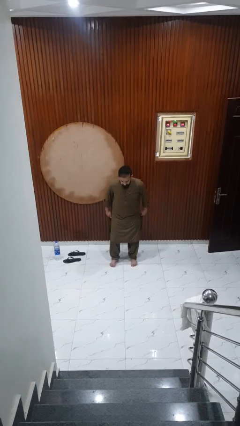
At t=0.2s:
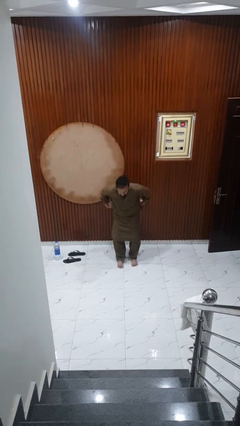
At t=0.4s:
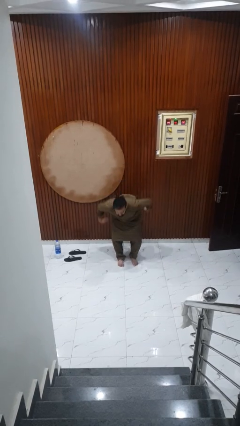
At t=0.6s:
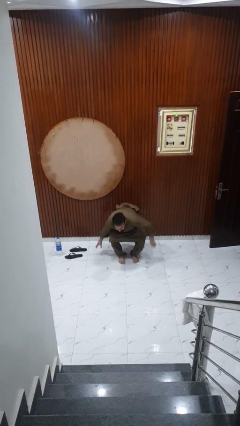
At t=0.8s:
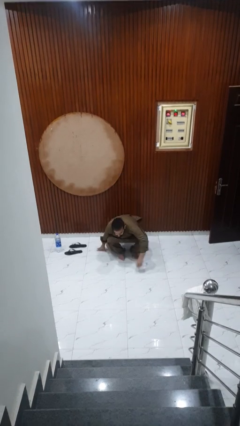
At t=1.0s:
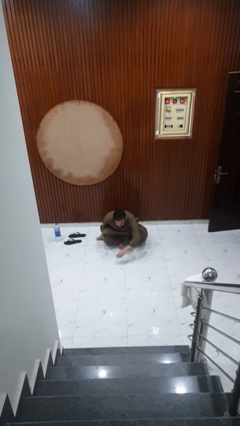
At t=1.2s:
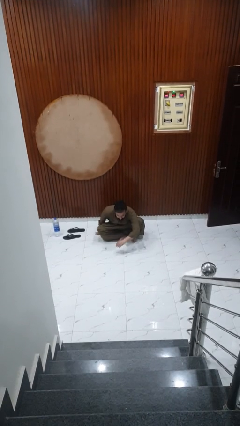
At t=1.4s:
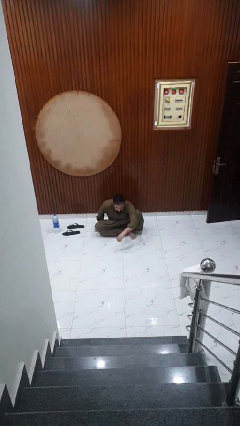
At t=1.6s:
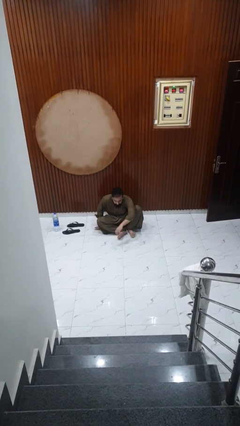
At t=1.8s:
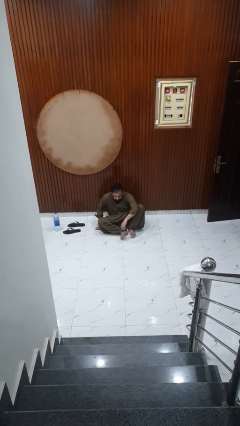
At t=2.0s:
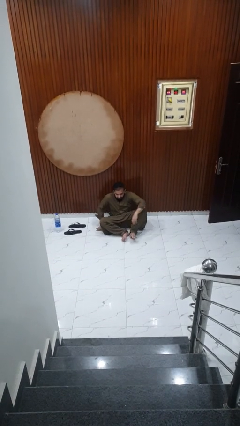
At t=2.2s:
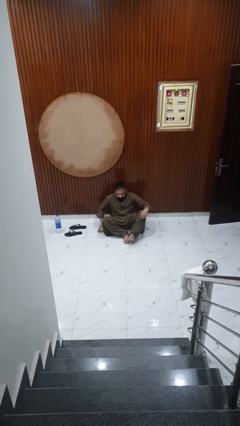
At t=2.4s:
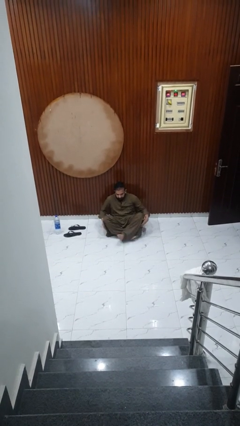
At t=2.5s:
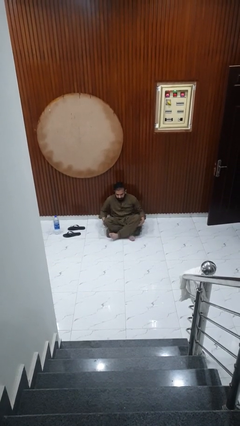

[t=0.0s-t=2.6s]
person sits crisscross

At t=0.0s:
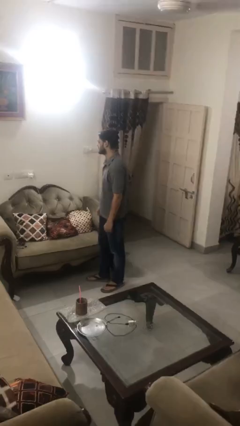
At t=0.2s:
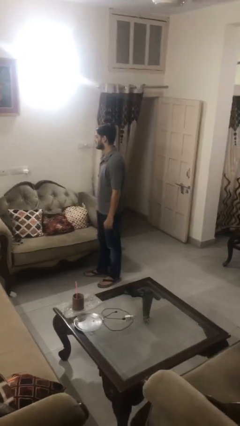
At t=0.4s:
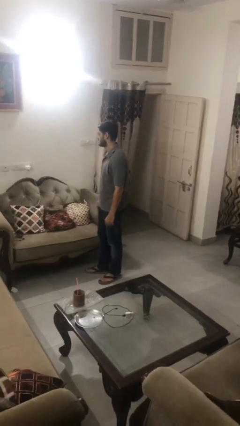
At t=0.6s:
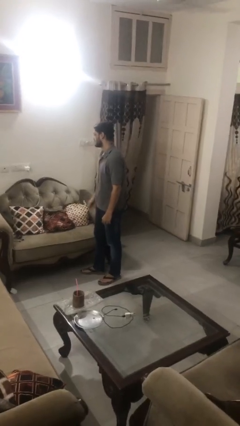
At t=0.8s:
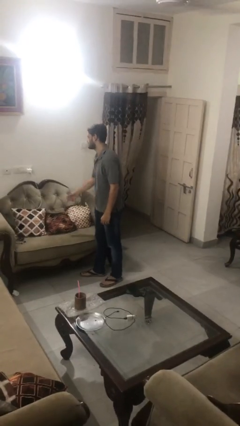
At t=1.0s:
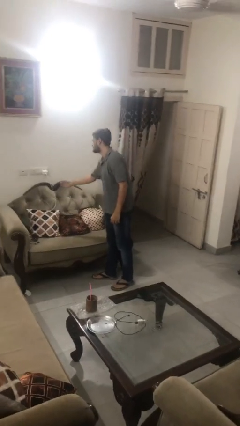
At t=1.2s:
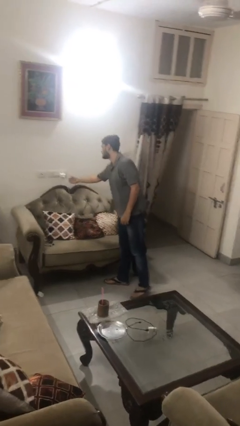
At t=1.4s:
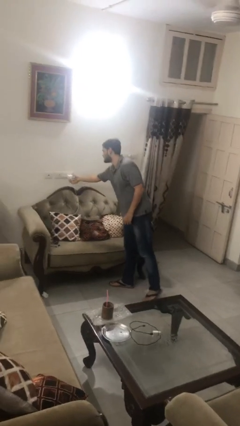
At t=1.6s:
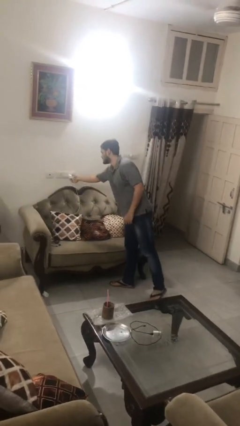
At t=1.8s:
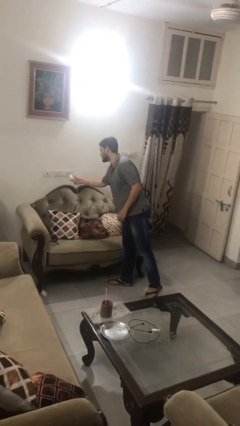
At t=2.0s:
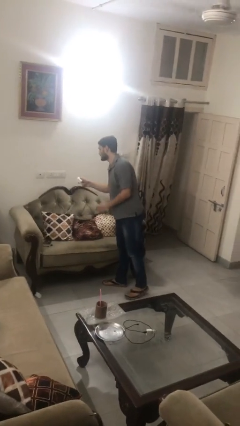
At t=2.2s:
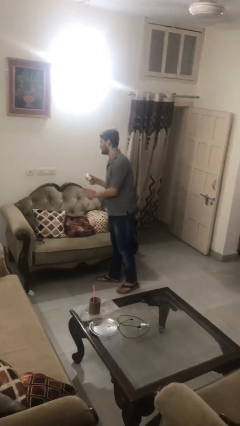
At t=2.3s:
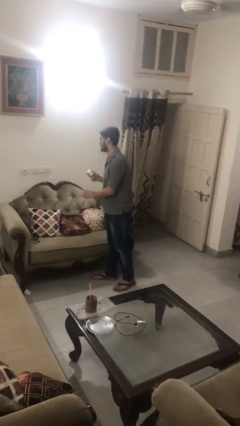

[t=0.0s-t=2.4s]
person unplugs from electrical socket

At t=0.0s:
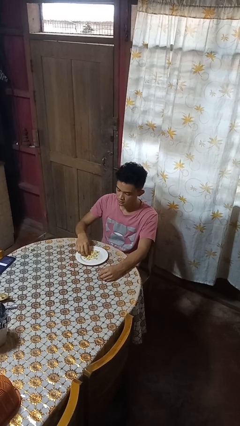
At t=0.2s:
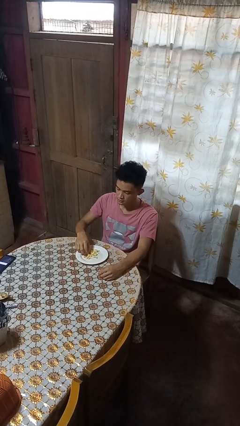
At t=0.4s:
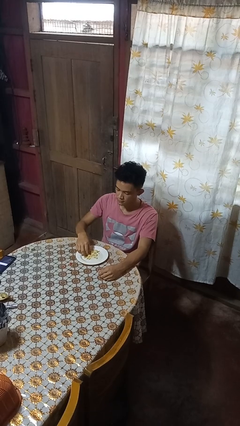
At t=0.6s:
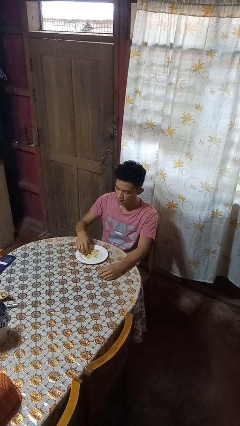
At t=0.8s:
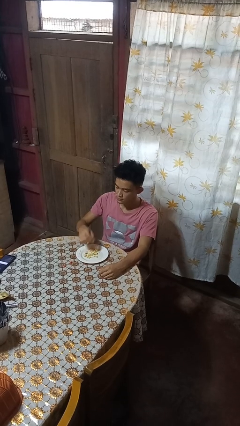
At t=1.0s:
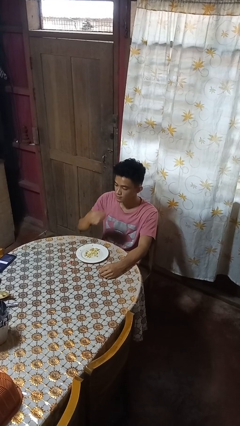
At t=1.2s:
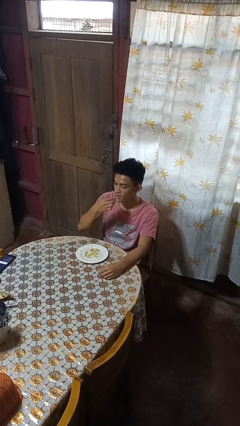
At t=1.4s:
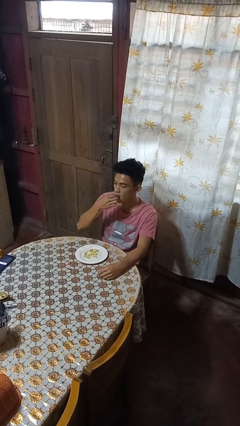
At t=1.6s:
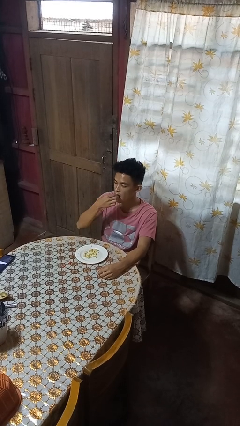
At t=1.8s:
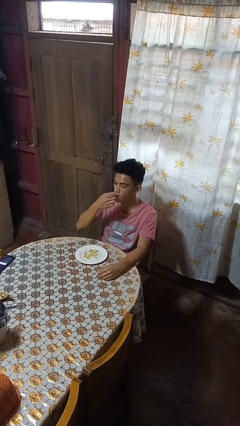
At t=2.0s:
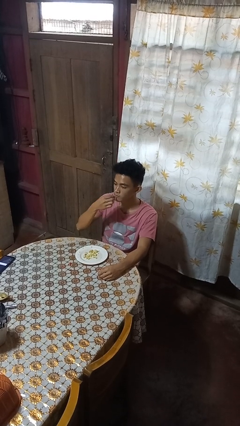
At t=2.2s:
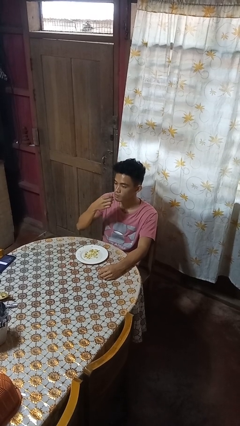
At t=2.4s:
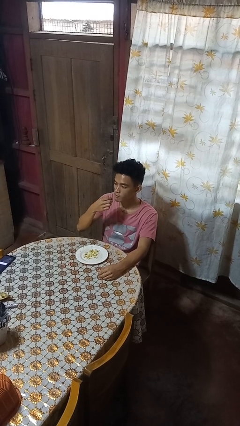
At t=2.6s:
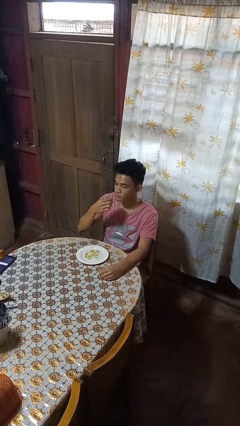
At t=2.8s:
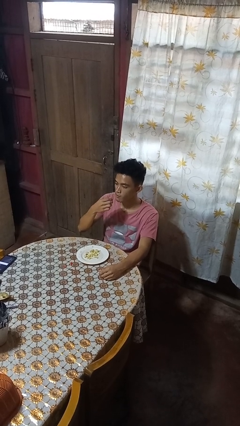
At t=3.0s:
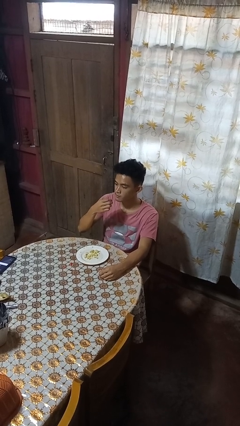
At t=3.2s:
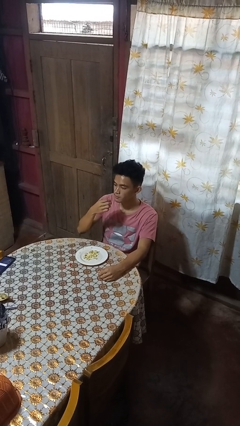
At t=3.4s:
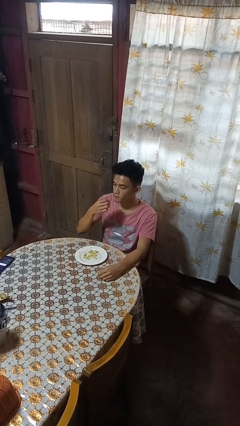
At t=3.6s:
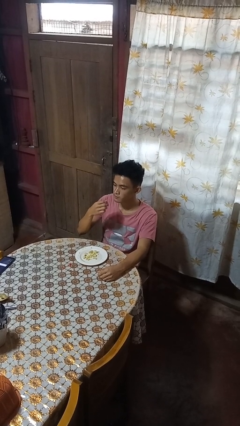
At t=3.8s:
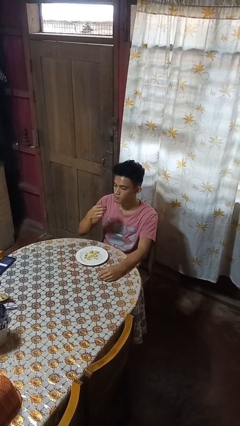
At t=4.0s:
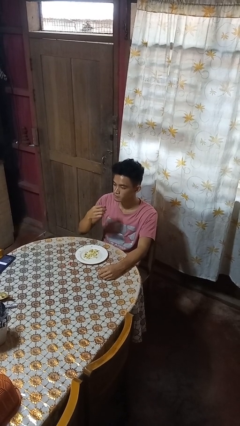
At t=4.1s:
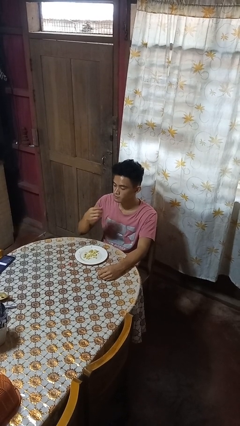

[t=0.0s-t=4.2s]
person eats with hands

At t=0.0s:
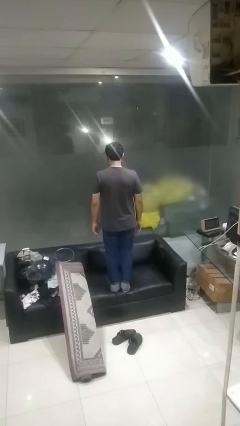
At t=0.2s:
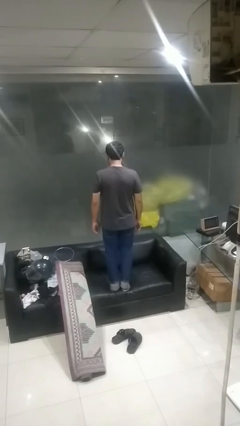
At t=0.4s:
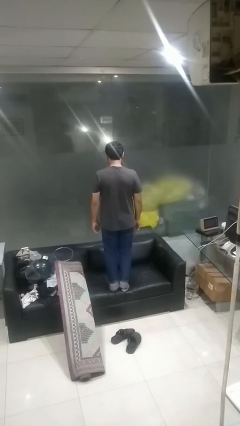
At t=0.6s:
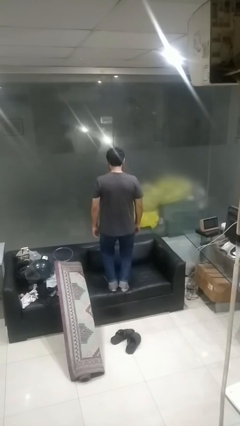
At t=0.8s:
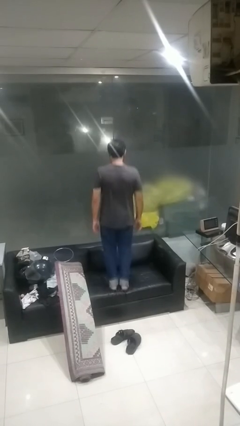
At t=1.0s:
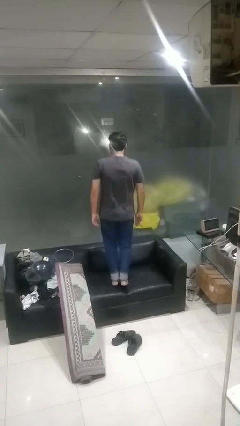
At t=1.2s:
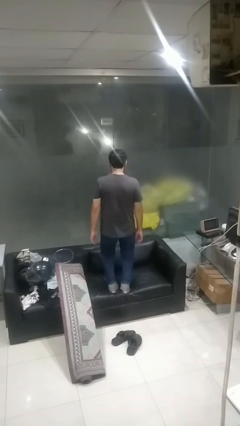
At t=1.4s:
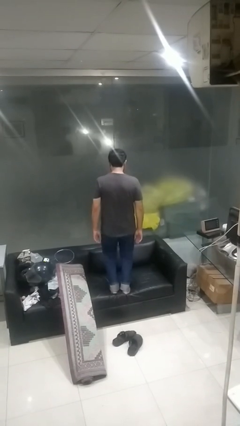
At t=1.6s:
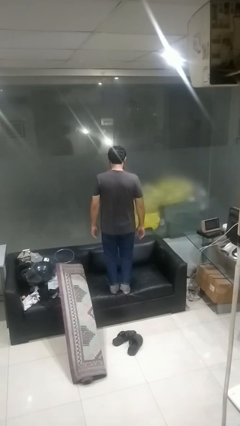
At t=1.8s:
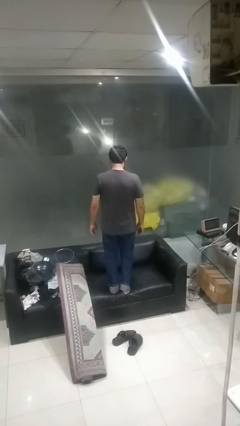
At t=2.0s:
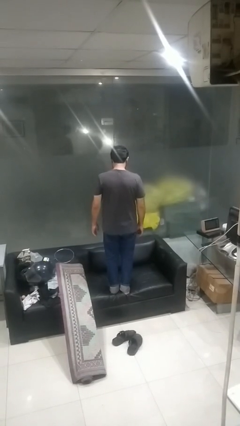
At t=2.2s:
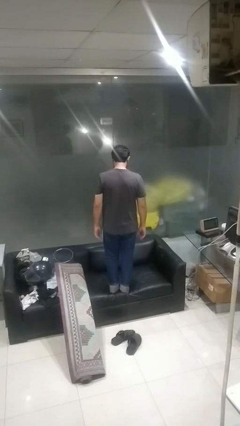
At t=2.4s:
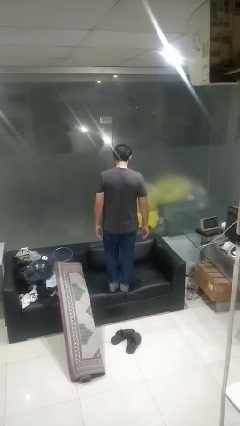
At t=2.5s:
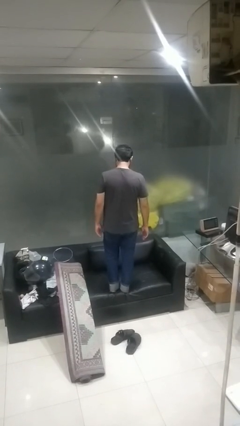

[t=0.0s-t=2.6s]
person jumps on couch

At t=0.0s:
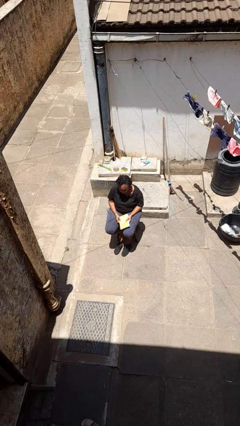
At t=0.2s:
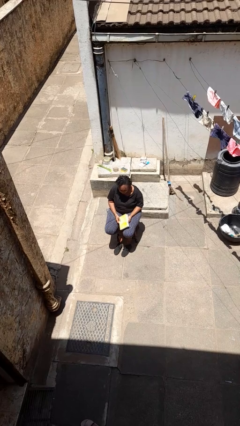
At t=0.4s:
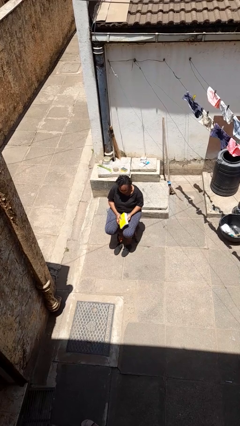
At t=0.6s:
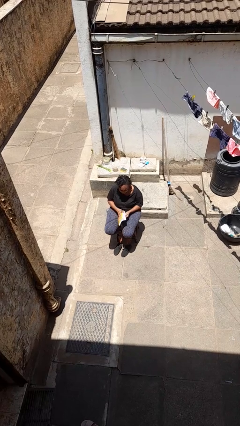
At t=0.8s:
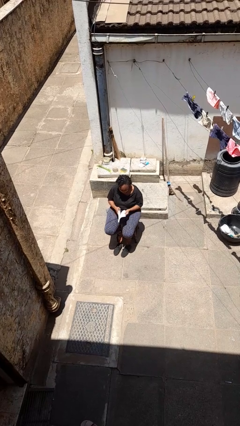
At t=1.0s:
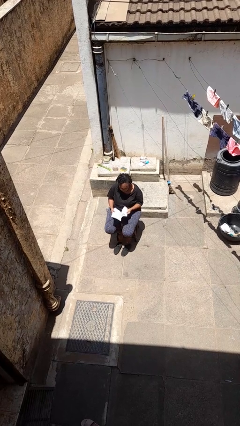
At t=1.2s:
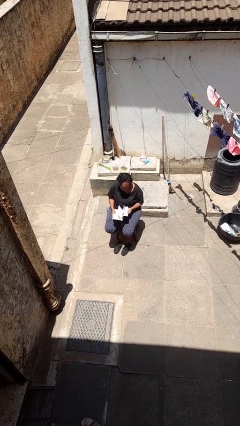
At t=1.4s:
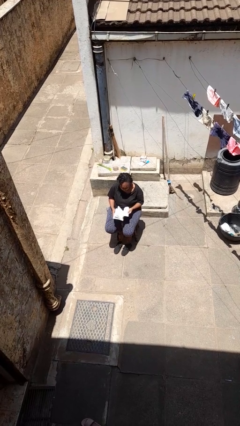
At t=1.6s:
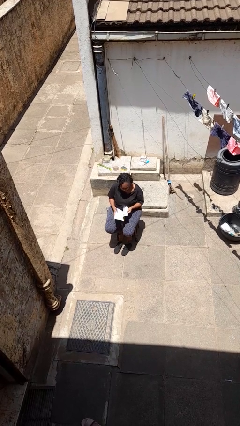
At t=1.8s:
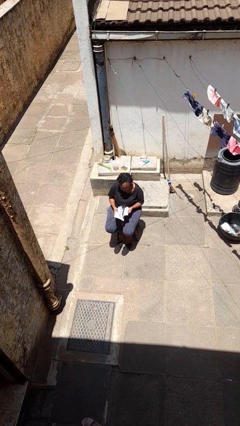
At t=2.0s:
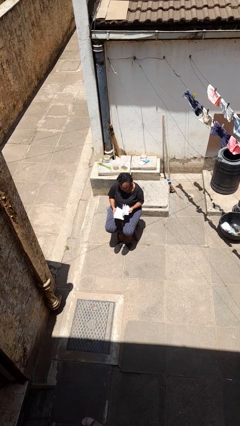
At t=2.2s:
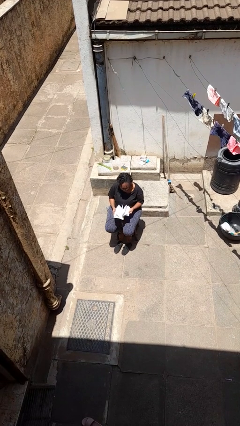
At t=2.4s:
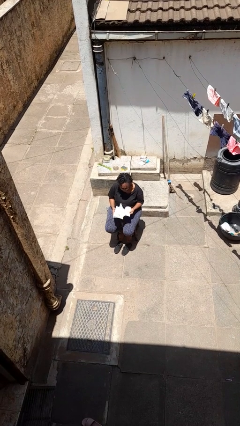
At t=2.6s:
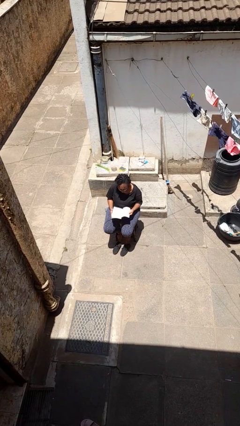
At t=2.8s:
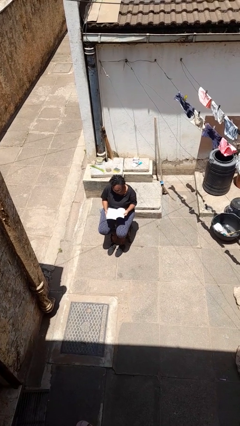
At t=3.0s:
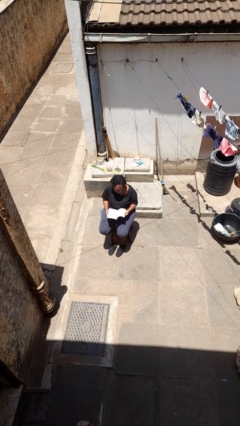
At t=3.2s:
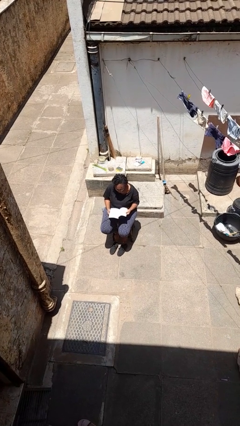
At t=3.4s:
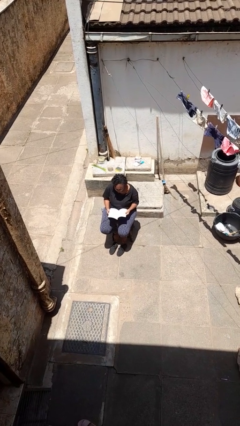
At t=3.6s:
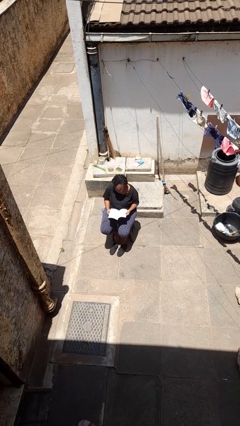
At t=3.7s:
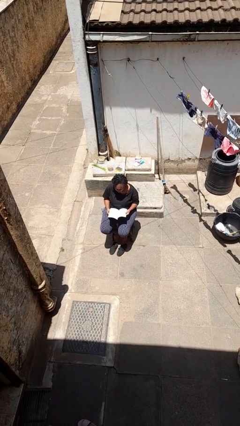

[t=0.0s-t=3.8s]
person reads book

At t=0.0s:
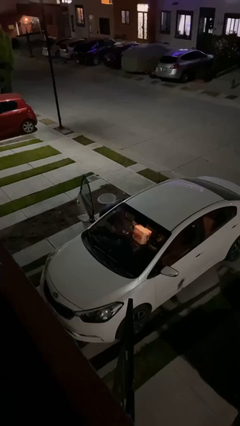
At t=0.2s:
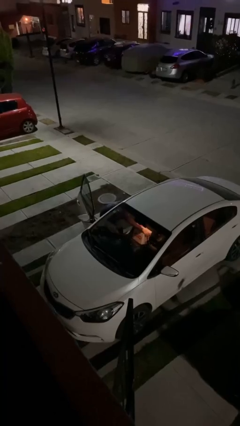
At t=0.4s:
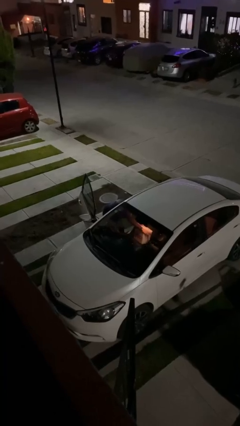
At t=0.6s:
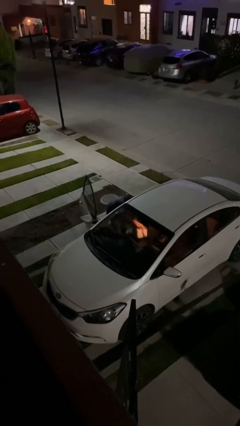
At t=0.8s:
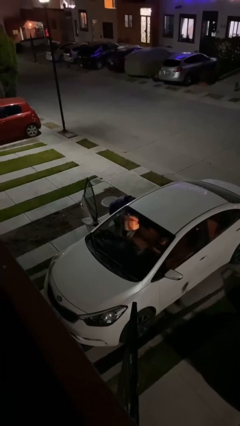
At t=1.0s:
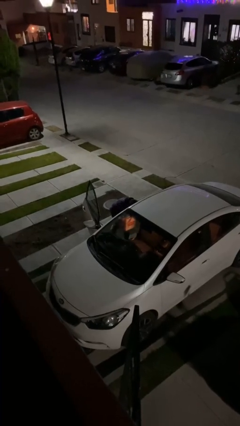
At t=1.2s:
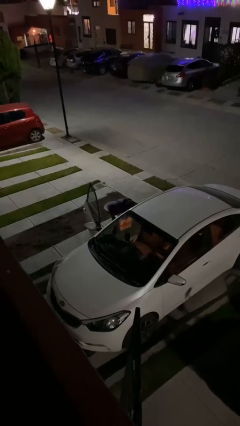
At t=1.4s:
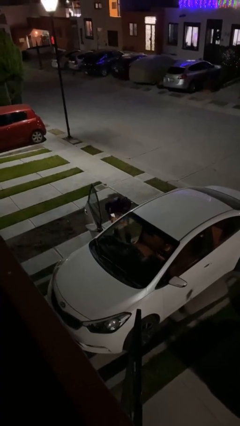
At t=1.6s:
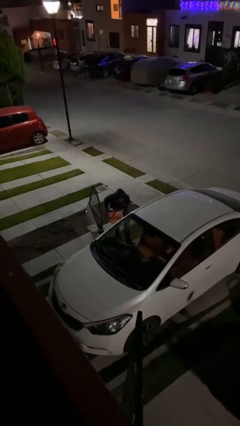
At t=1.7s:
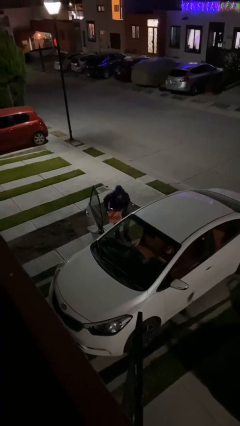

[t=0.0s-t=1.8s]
person unloads car
